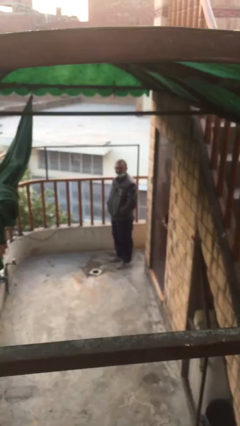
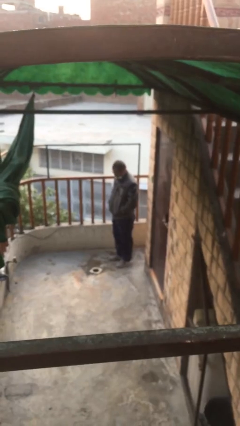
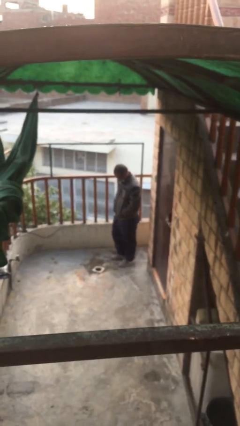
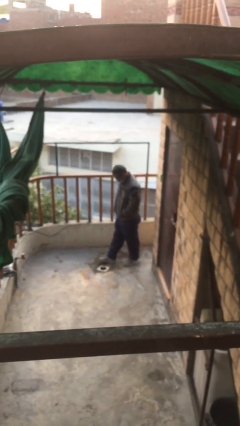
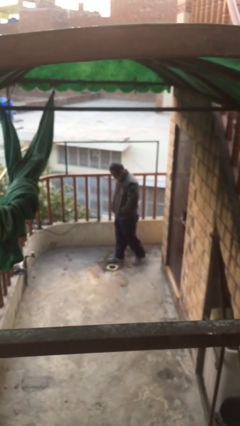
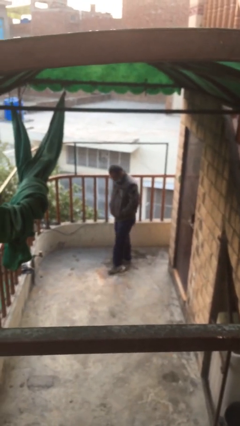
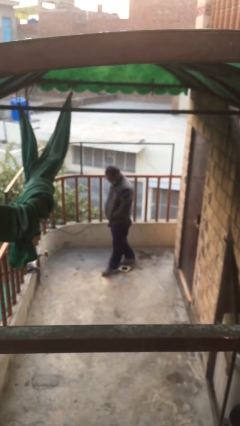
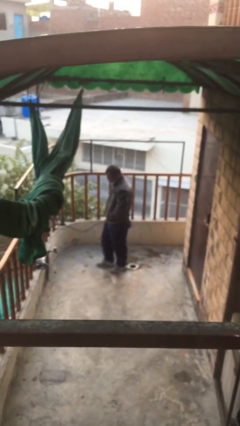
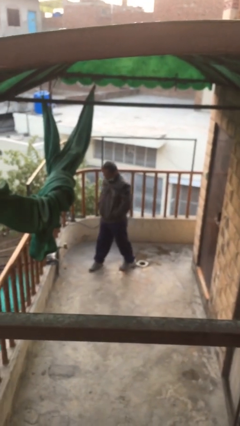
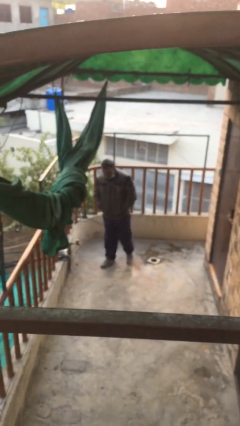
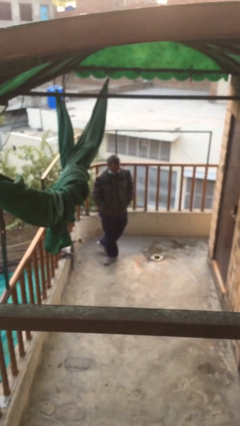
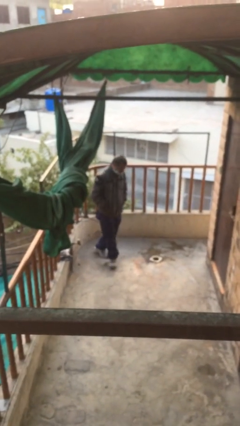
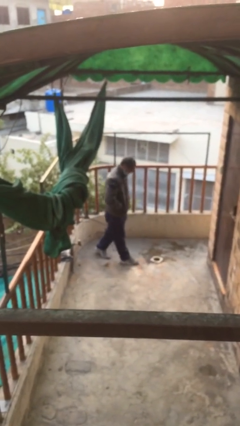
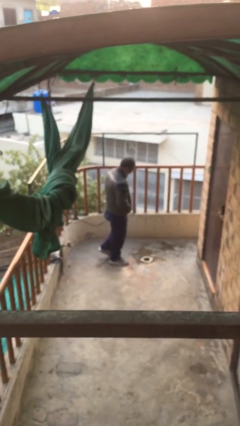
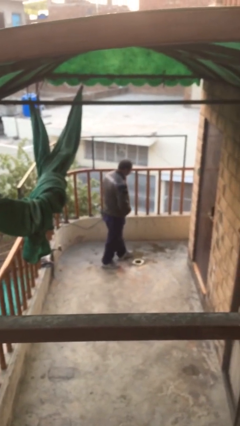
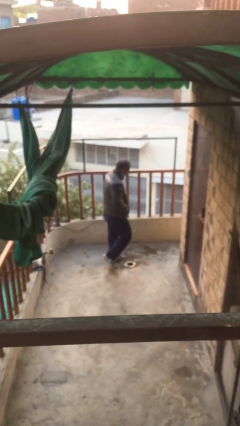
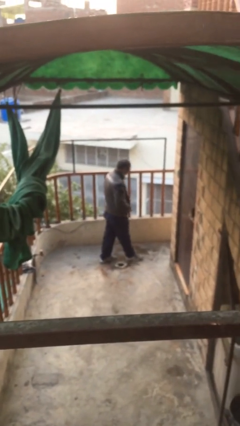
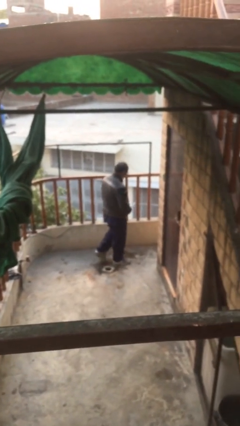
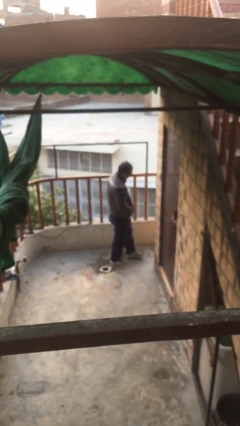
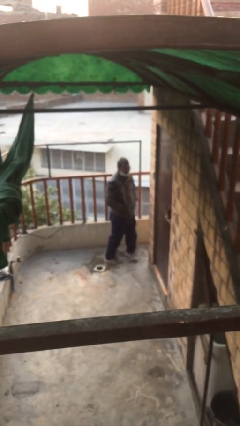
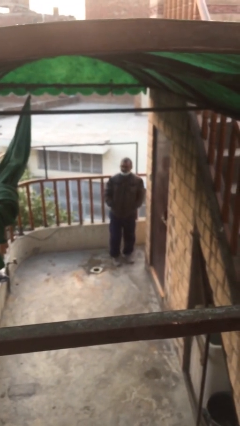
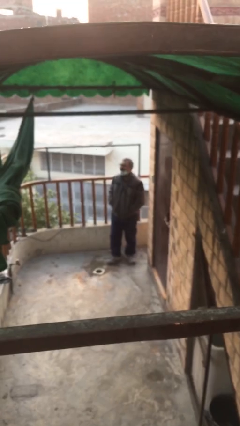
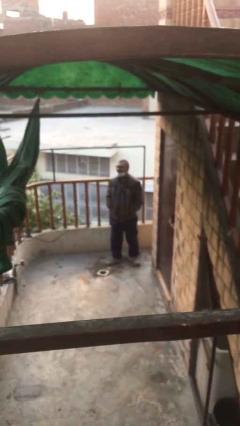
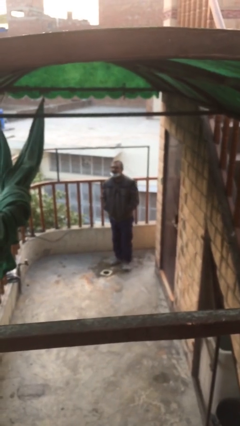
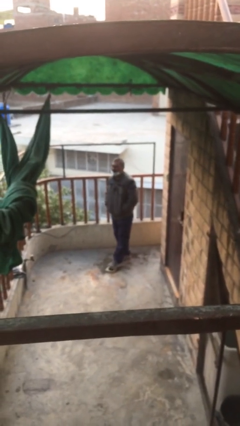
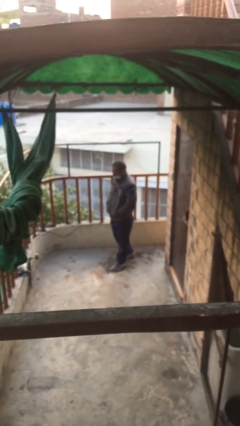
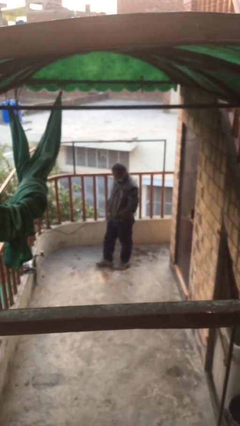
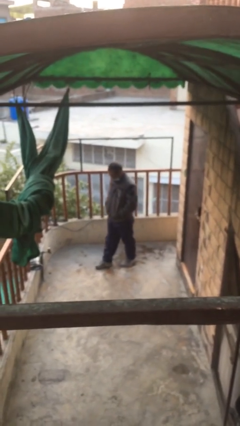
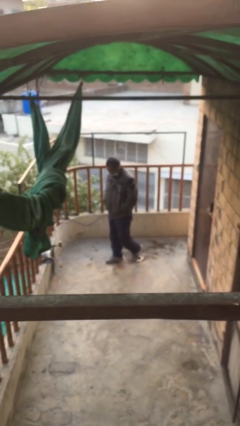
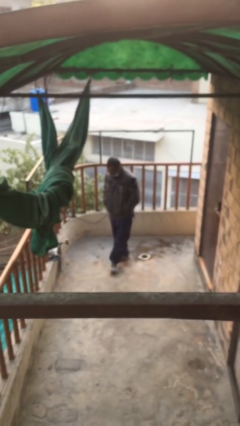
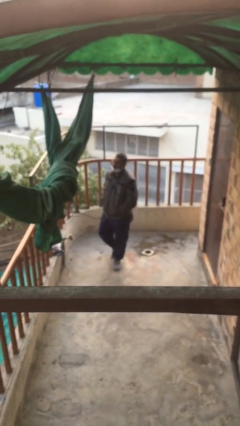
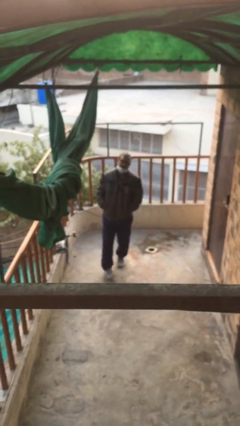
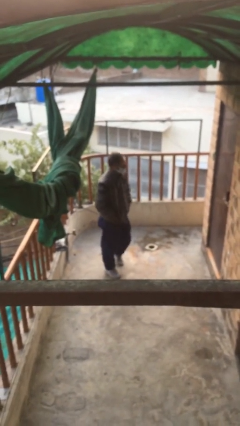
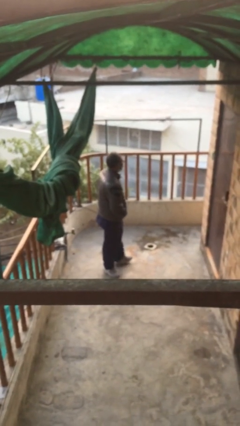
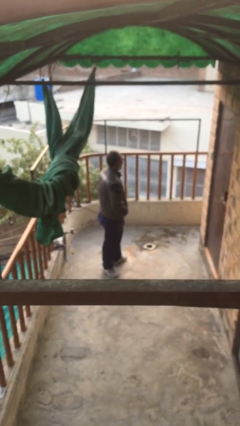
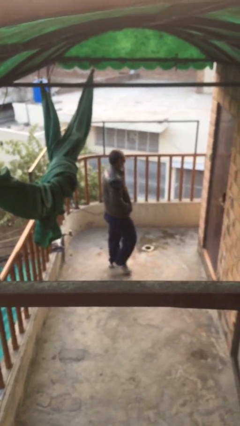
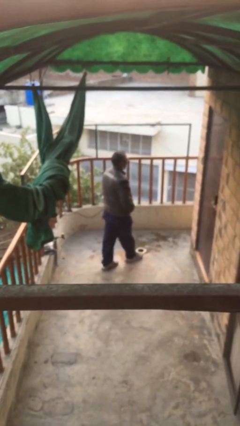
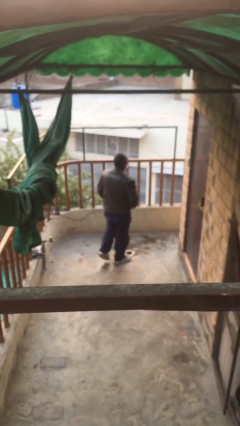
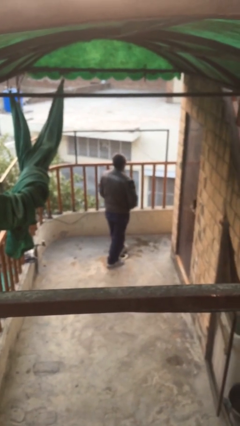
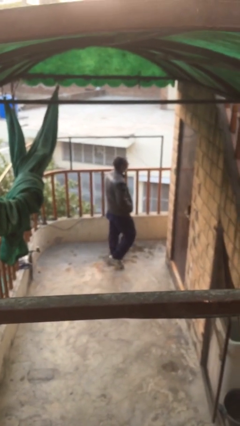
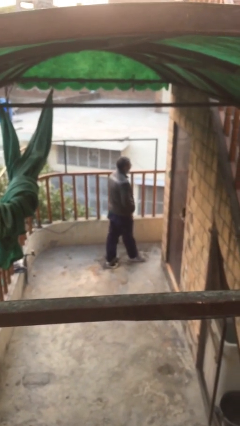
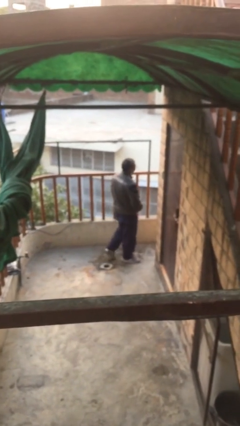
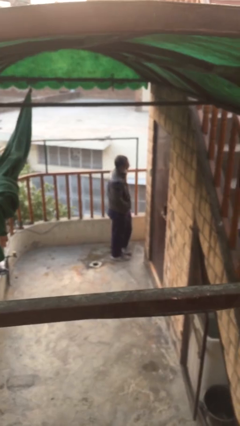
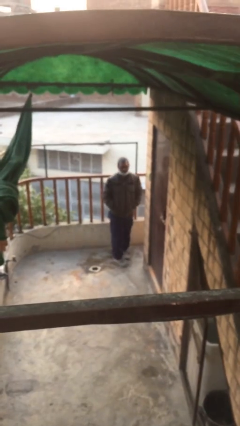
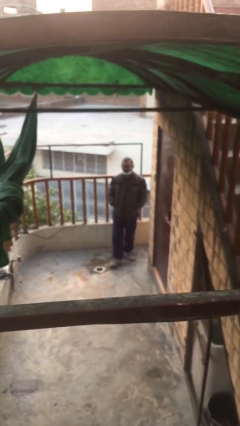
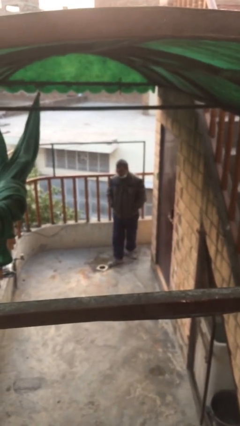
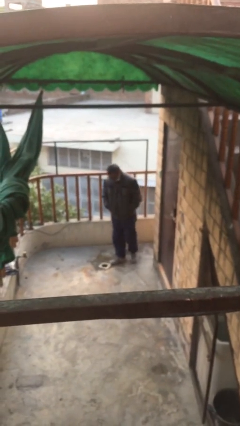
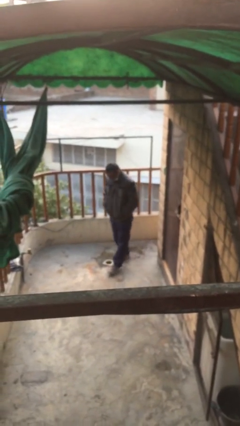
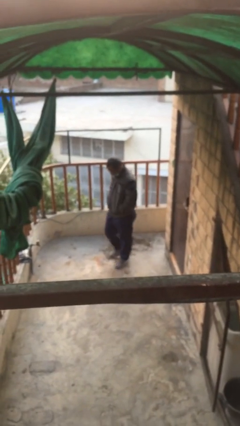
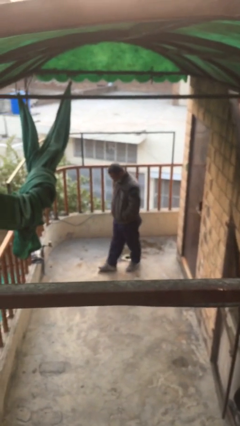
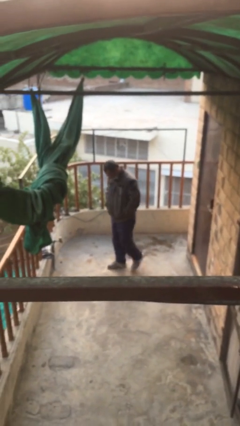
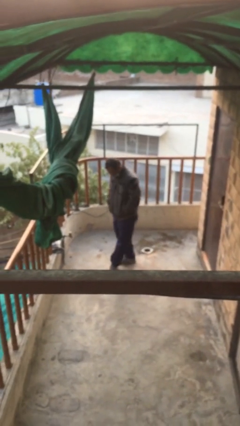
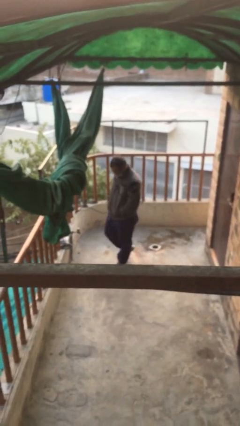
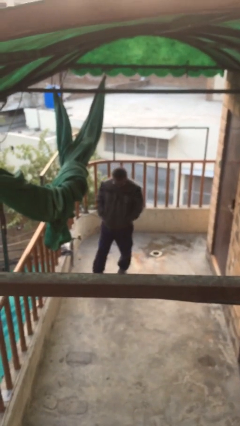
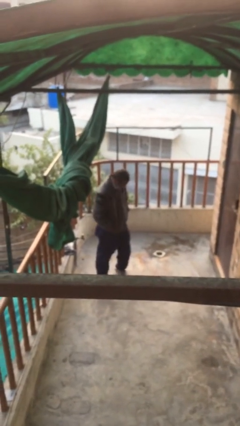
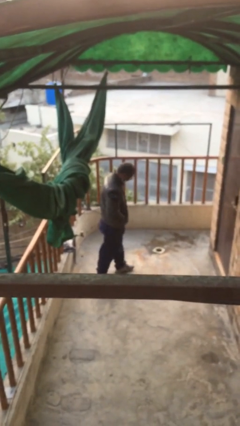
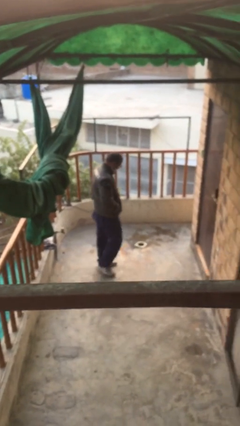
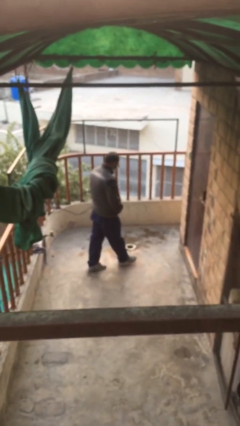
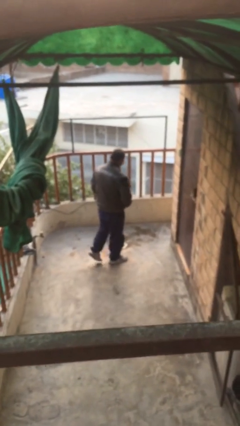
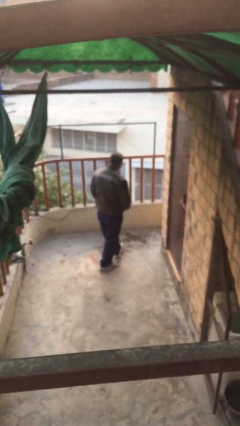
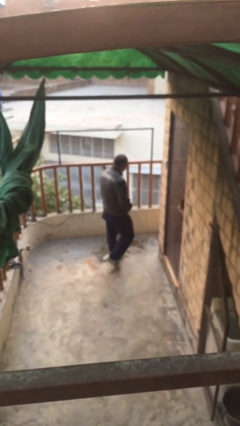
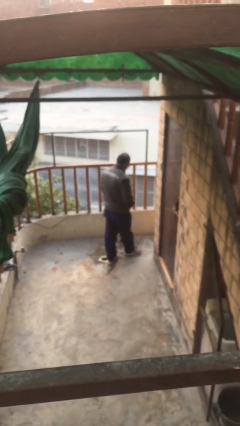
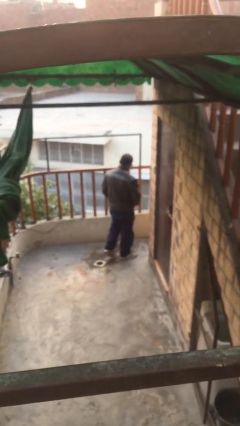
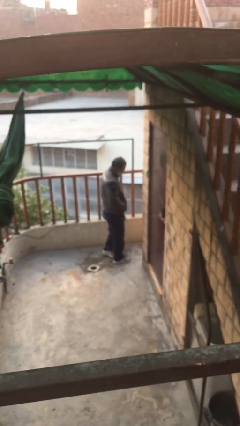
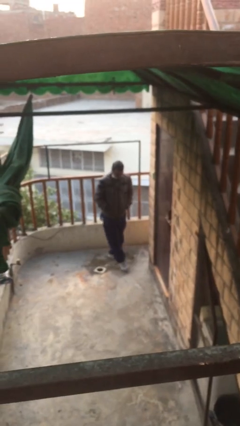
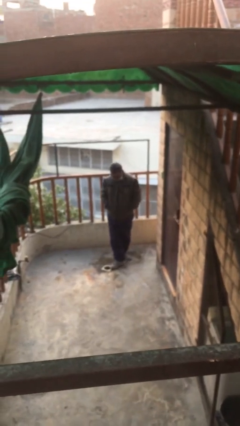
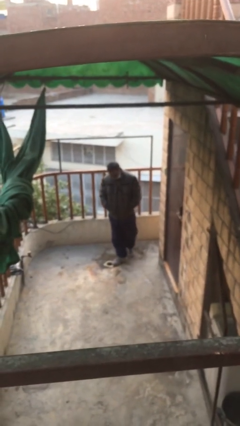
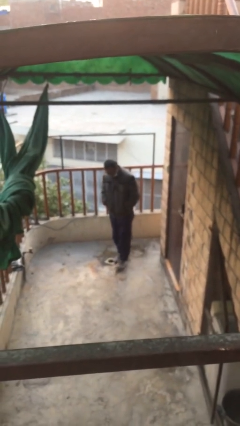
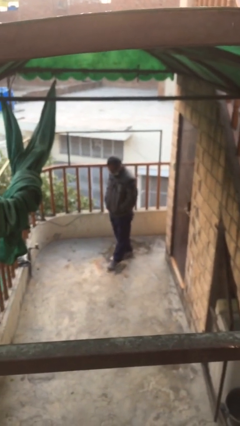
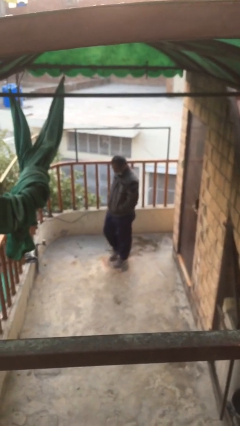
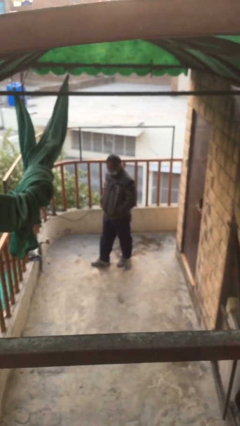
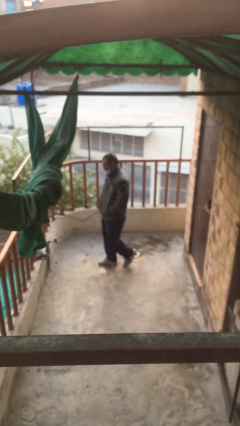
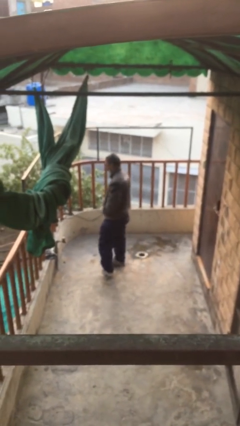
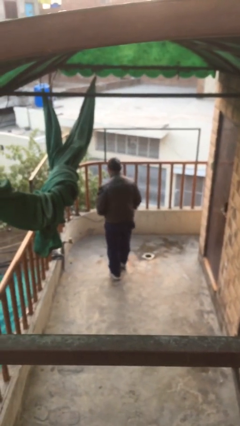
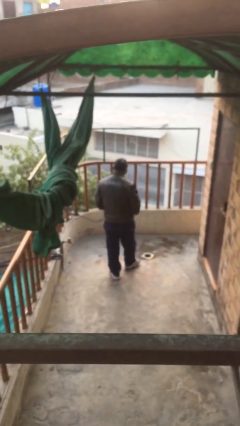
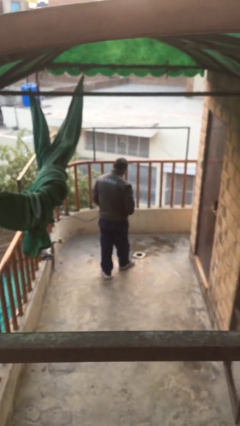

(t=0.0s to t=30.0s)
person walks

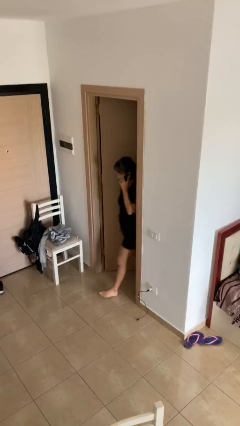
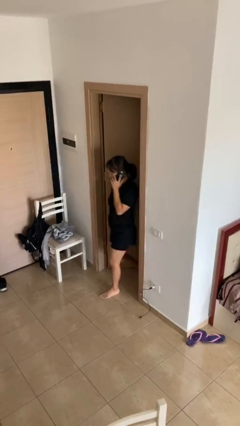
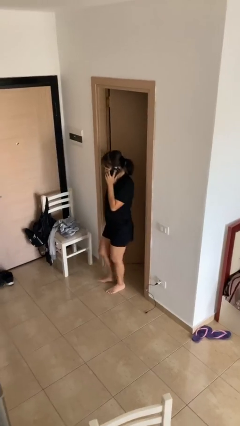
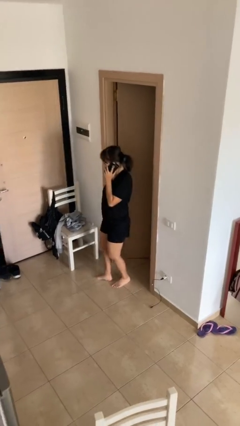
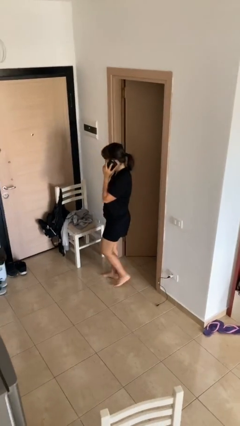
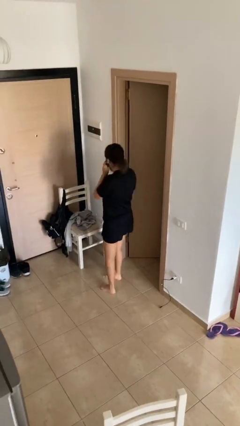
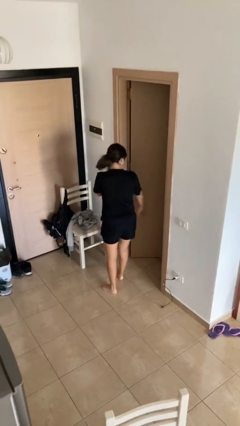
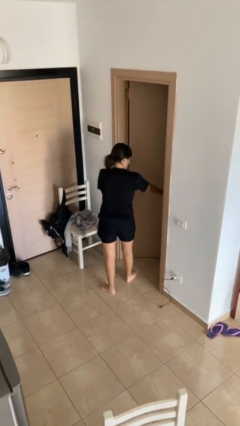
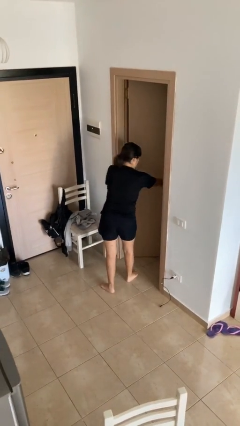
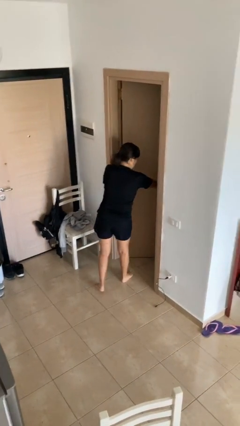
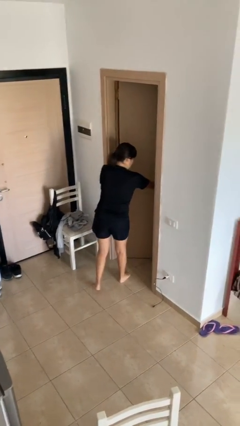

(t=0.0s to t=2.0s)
person enters scene through structure

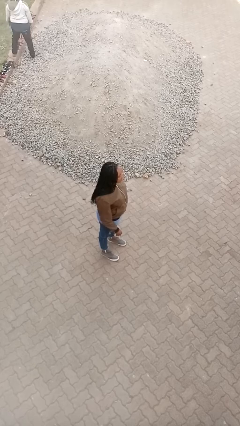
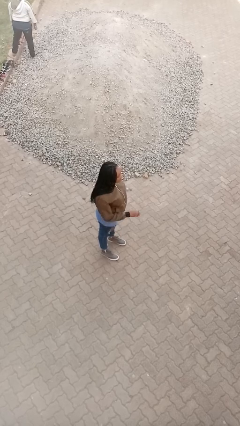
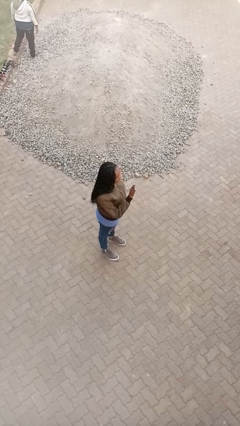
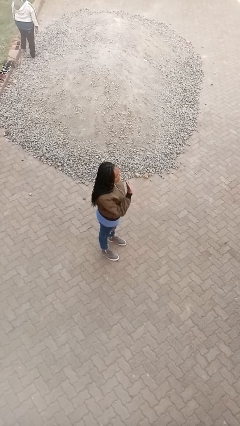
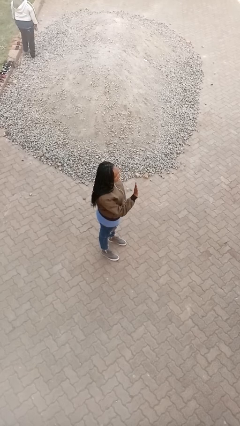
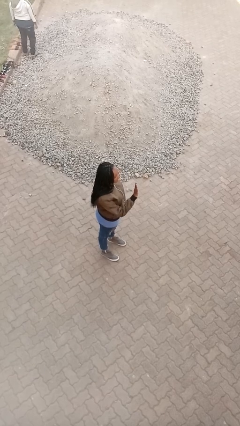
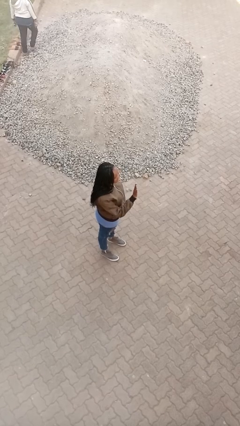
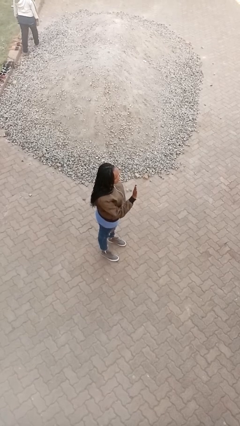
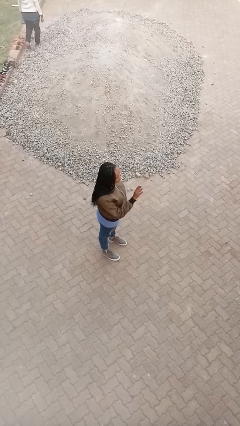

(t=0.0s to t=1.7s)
person gestures stop
